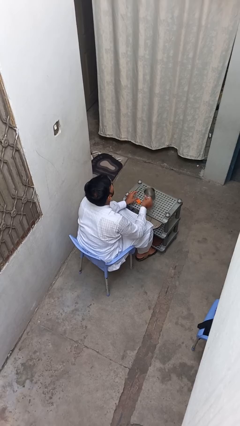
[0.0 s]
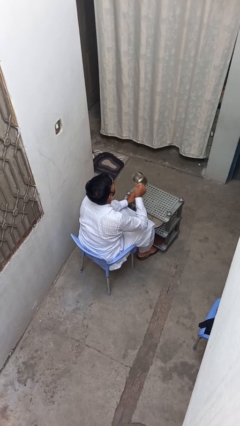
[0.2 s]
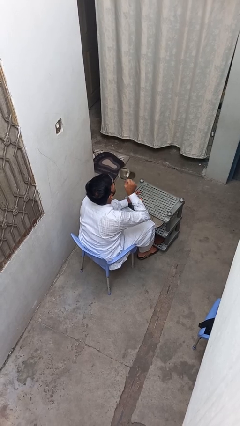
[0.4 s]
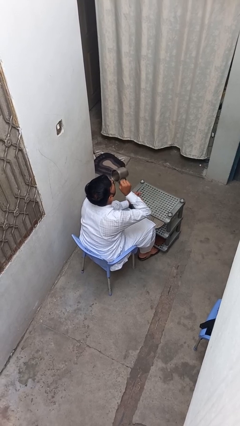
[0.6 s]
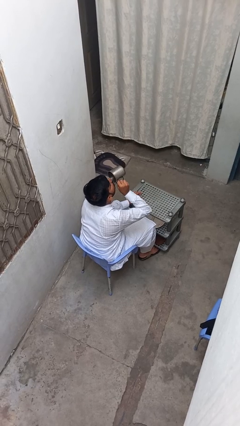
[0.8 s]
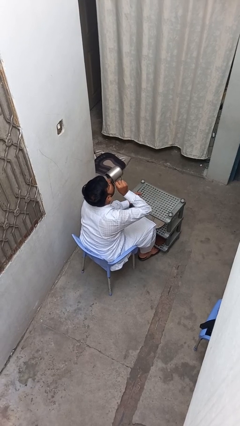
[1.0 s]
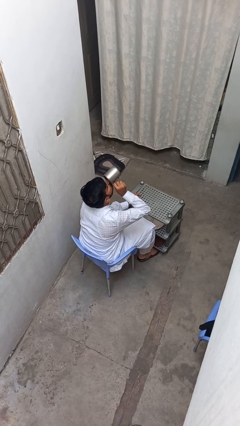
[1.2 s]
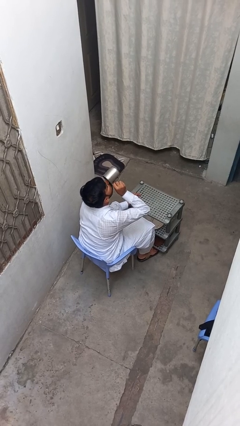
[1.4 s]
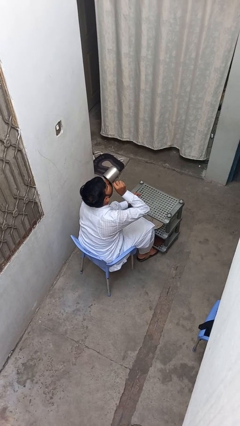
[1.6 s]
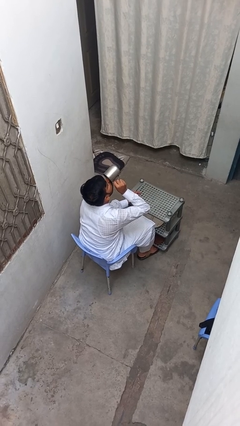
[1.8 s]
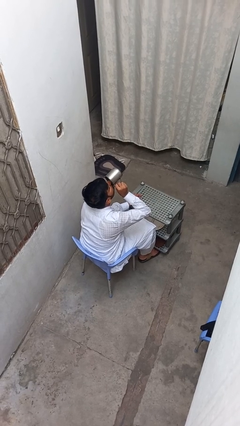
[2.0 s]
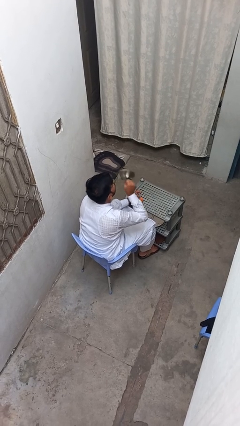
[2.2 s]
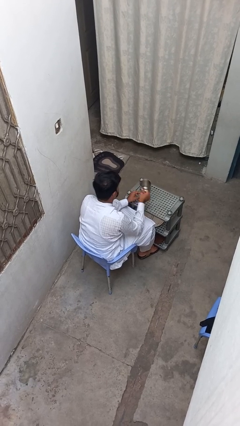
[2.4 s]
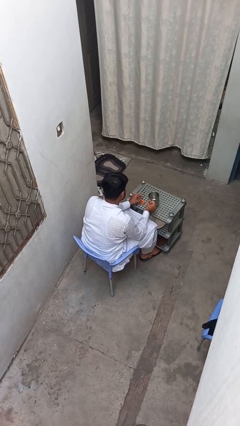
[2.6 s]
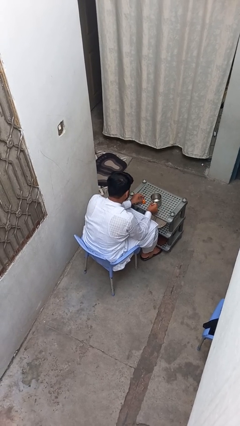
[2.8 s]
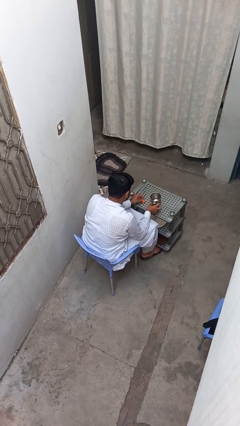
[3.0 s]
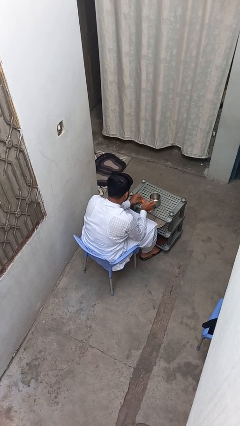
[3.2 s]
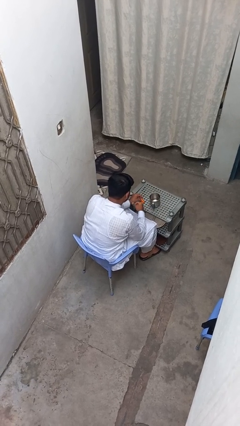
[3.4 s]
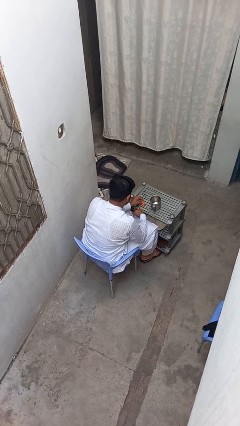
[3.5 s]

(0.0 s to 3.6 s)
person drinks from cup

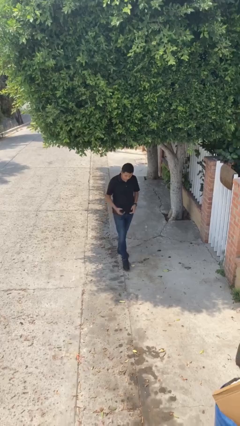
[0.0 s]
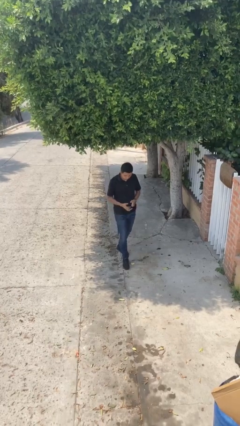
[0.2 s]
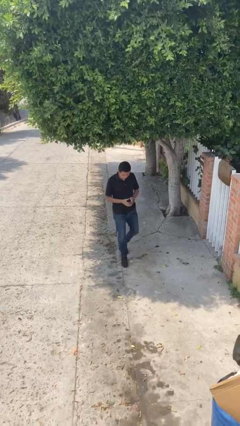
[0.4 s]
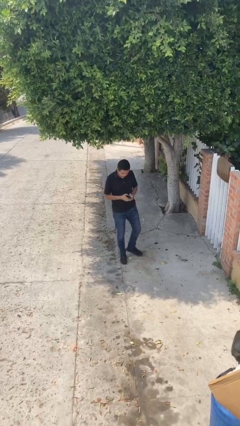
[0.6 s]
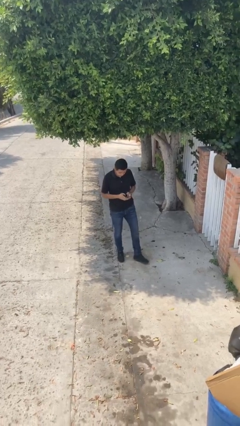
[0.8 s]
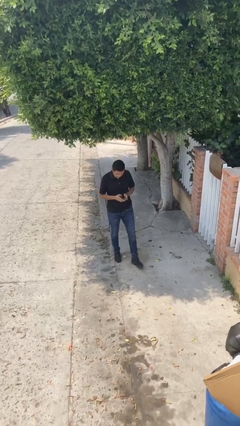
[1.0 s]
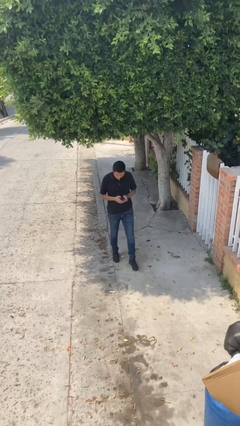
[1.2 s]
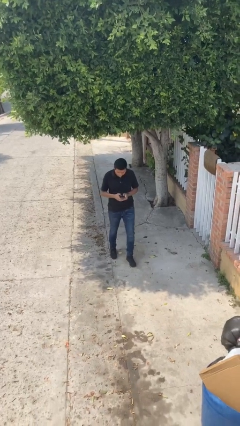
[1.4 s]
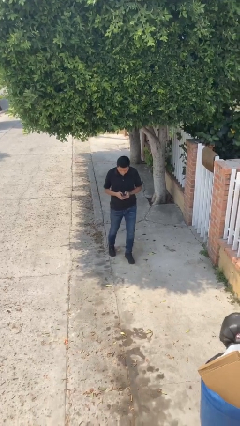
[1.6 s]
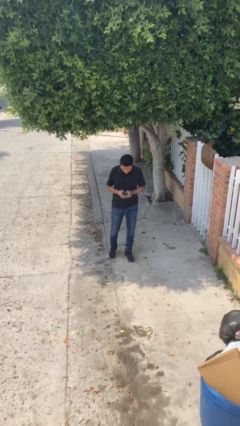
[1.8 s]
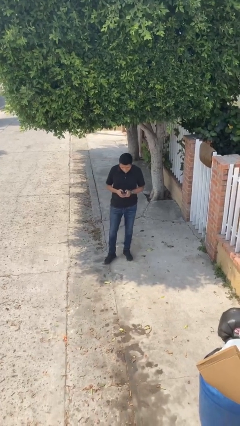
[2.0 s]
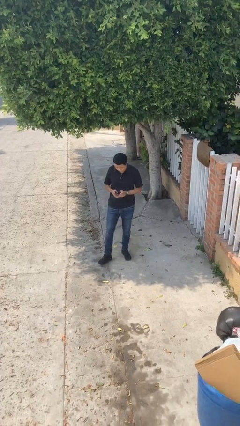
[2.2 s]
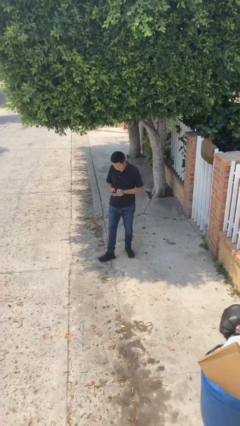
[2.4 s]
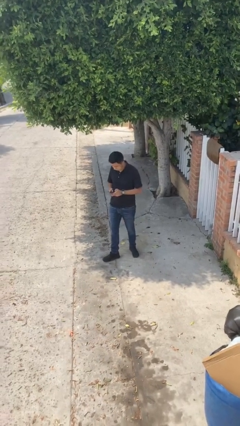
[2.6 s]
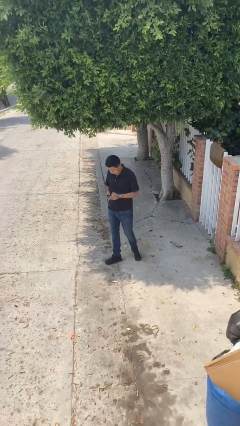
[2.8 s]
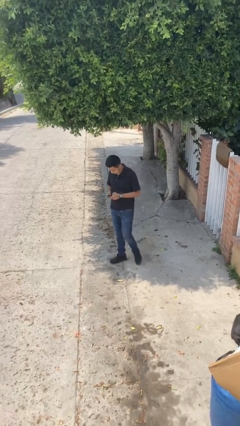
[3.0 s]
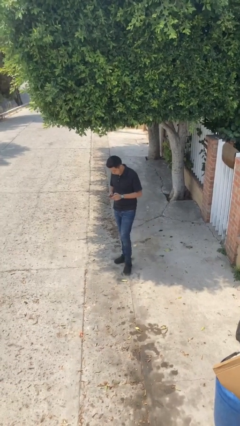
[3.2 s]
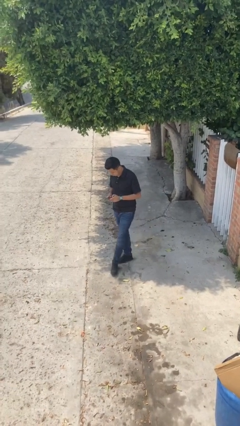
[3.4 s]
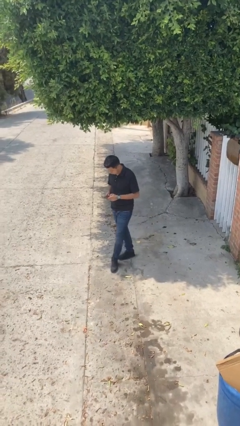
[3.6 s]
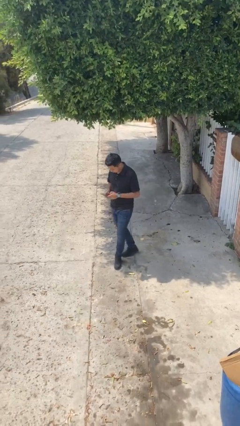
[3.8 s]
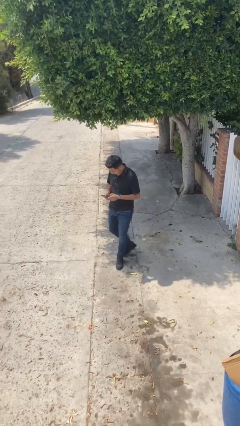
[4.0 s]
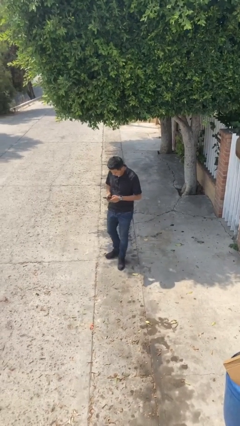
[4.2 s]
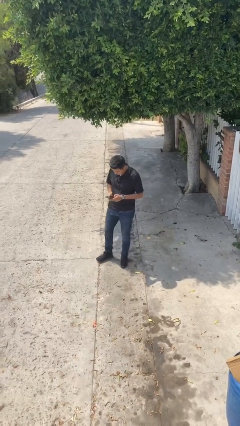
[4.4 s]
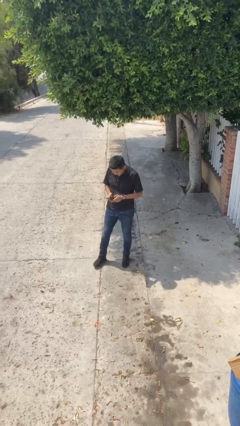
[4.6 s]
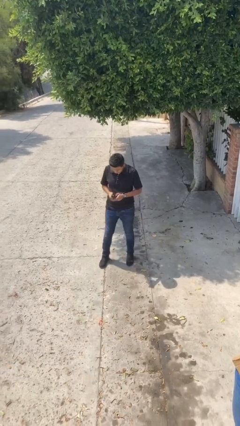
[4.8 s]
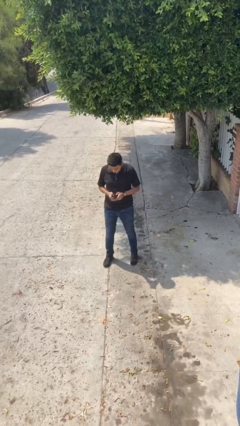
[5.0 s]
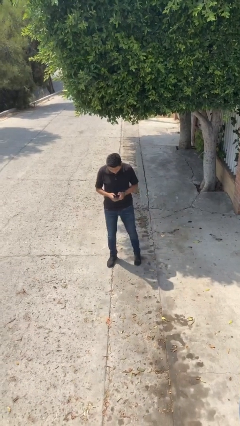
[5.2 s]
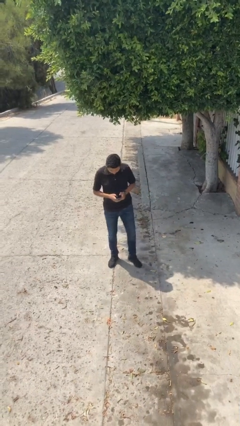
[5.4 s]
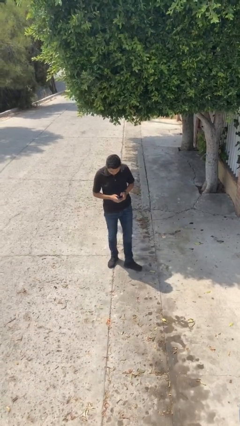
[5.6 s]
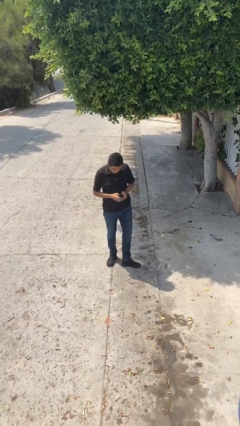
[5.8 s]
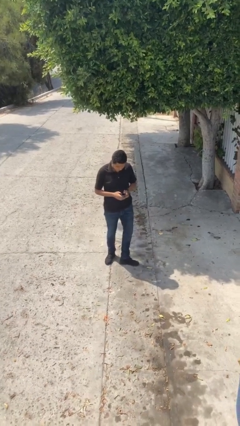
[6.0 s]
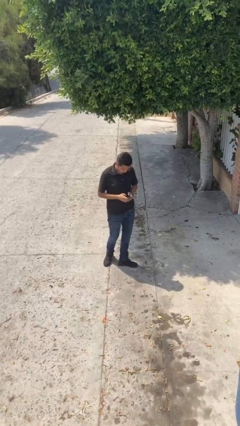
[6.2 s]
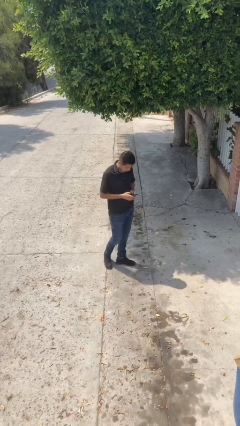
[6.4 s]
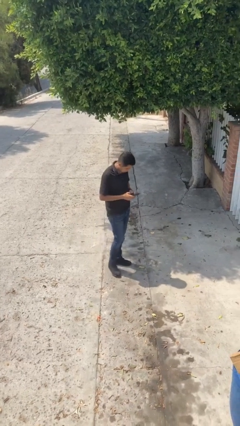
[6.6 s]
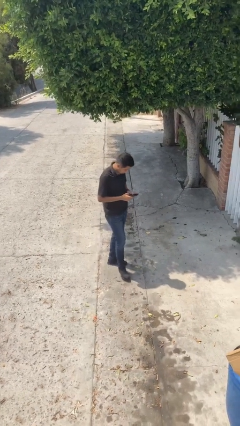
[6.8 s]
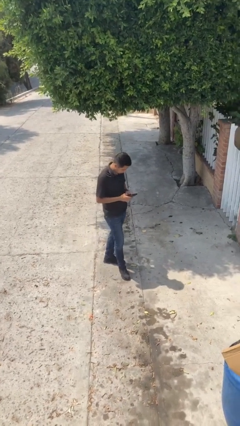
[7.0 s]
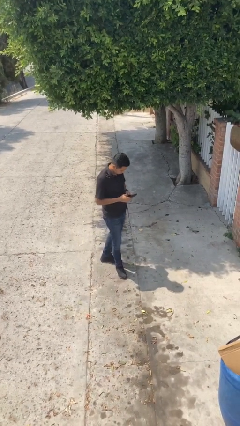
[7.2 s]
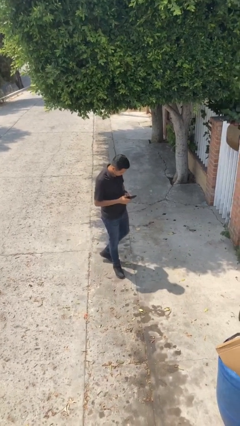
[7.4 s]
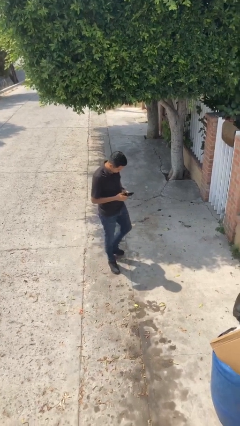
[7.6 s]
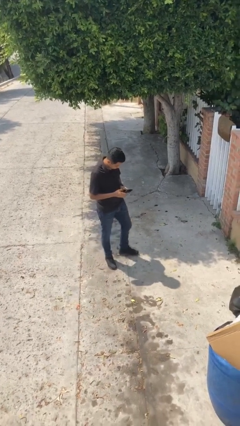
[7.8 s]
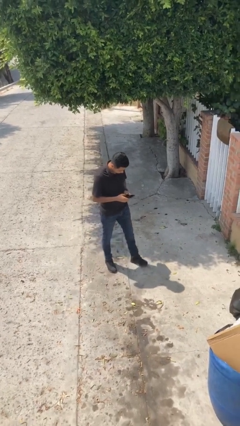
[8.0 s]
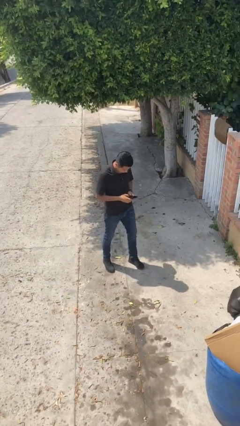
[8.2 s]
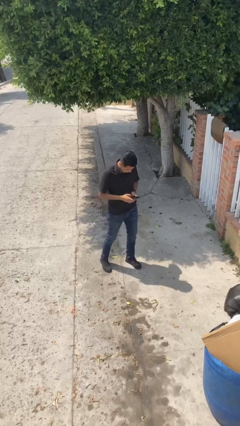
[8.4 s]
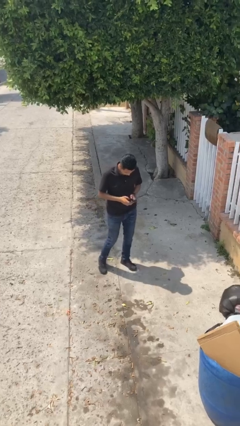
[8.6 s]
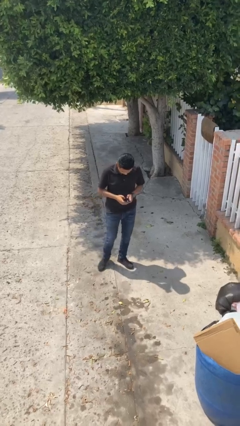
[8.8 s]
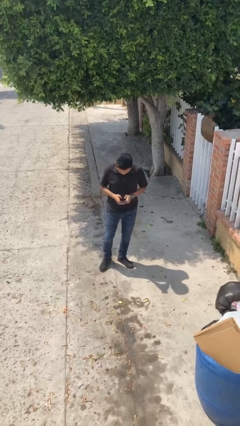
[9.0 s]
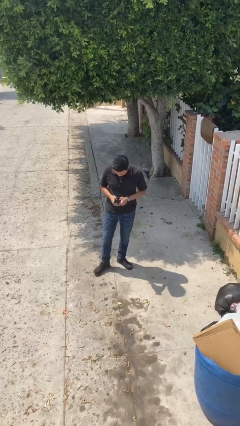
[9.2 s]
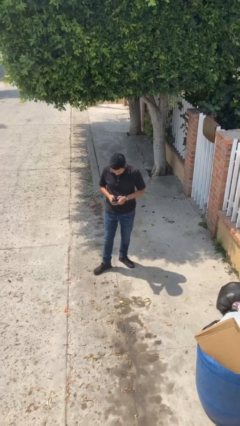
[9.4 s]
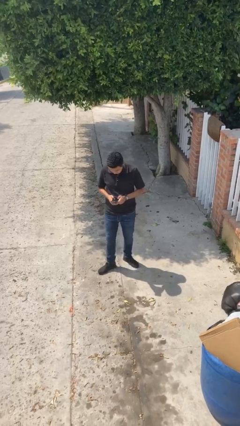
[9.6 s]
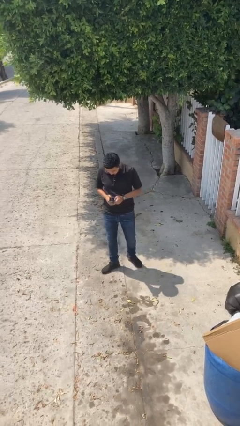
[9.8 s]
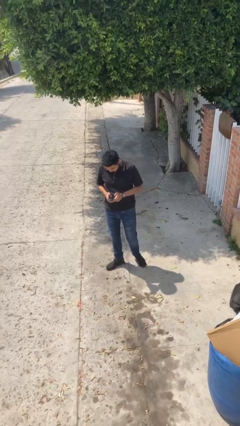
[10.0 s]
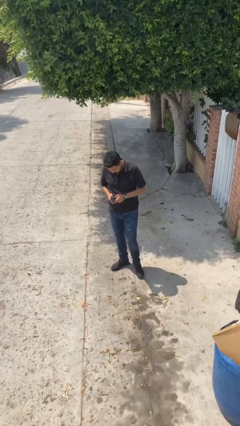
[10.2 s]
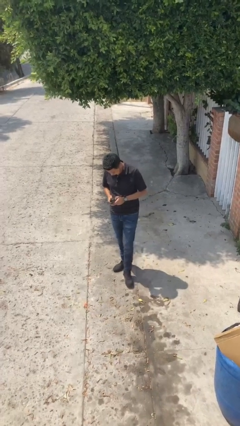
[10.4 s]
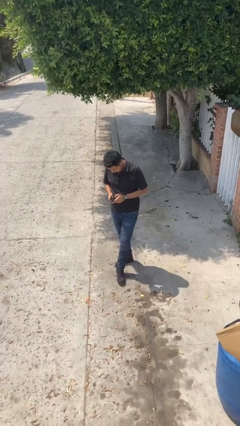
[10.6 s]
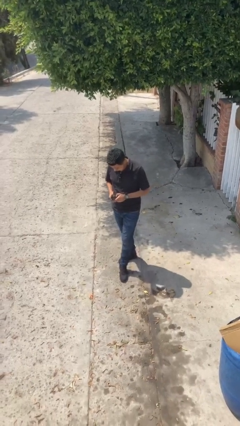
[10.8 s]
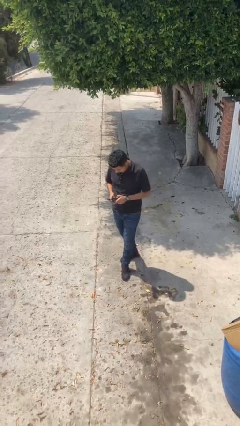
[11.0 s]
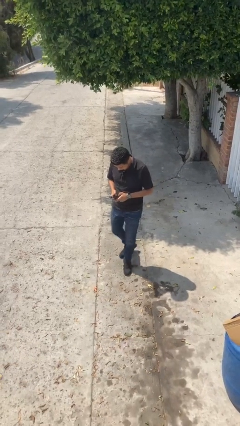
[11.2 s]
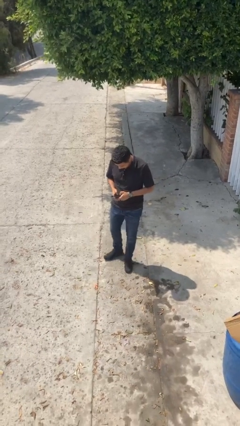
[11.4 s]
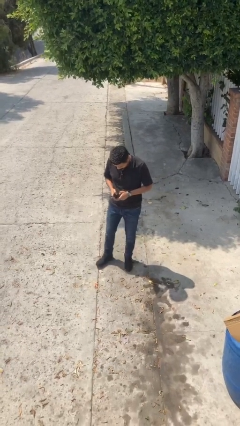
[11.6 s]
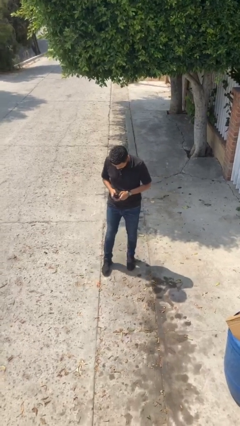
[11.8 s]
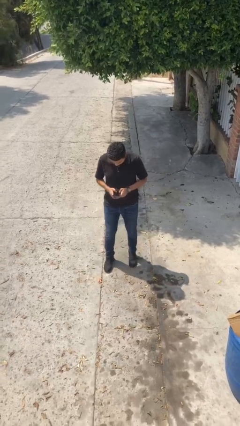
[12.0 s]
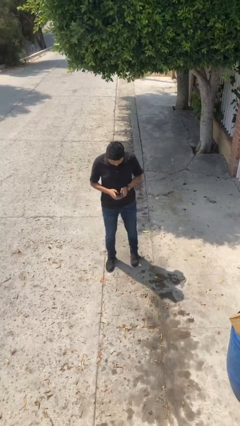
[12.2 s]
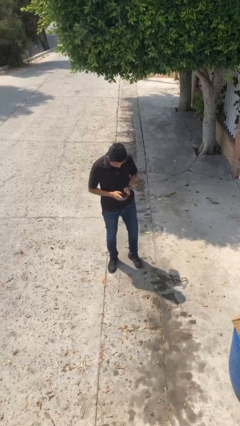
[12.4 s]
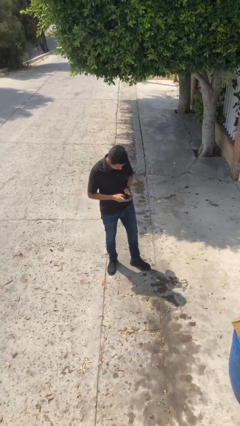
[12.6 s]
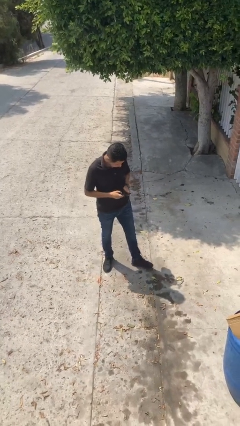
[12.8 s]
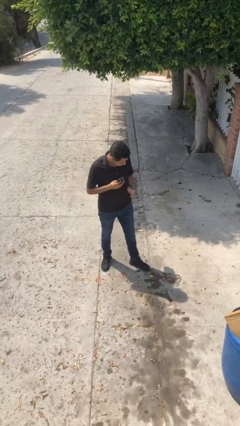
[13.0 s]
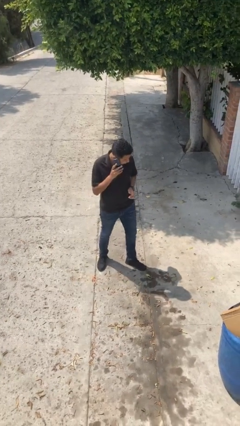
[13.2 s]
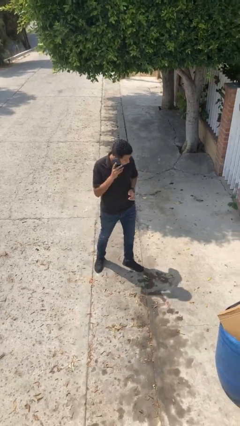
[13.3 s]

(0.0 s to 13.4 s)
person texts on phone

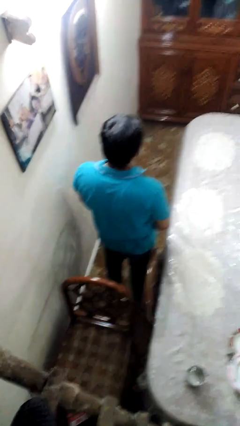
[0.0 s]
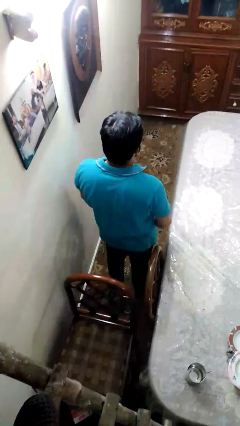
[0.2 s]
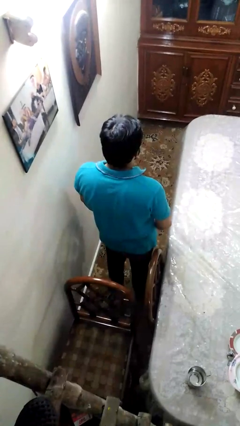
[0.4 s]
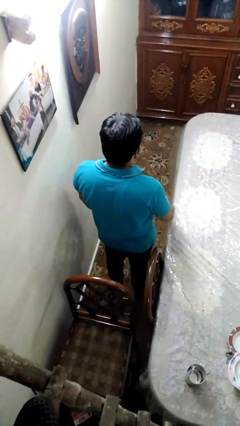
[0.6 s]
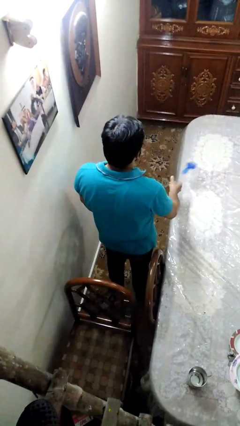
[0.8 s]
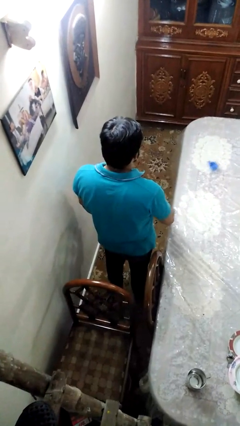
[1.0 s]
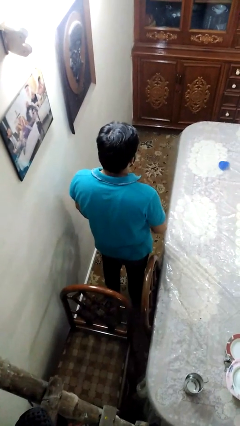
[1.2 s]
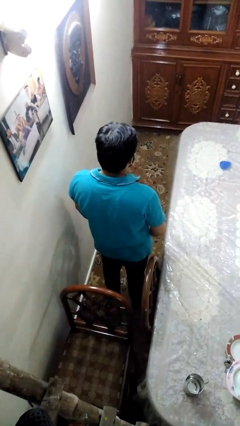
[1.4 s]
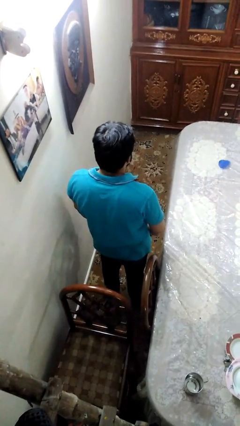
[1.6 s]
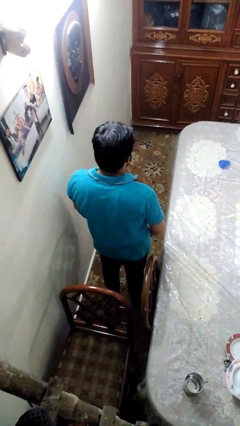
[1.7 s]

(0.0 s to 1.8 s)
person throws object on table
